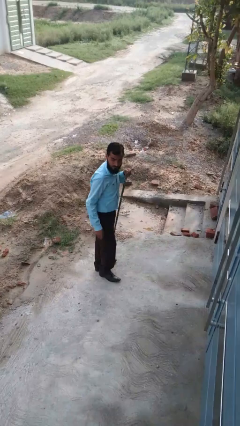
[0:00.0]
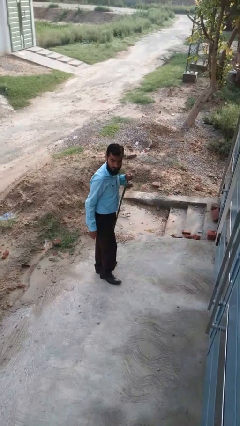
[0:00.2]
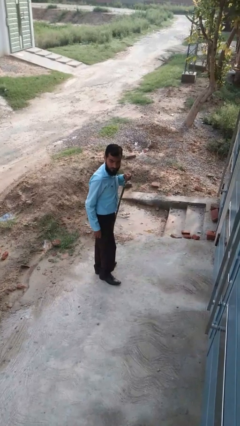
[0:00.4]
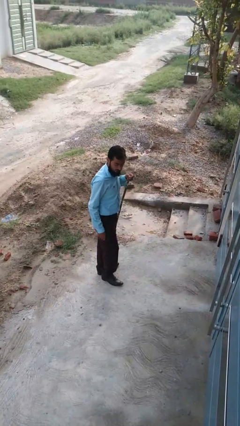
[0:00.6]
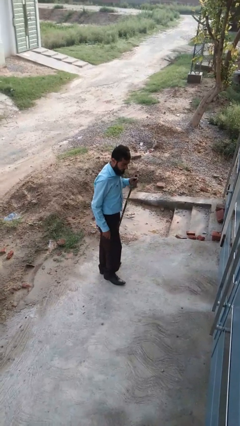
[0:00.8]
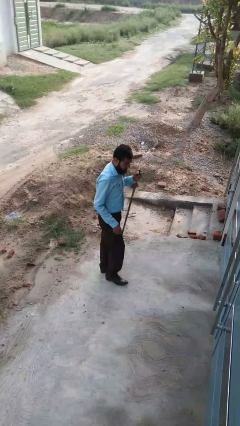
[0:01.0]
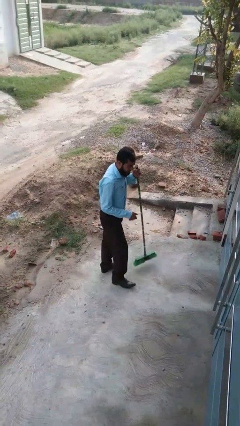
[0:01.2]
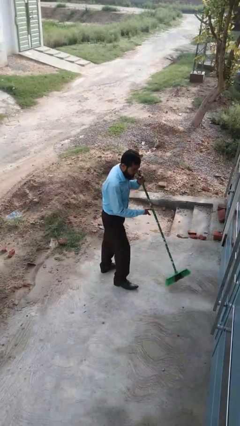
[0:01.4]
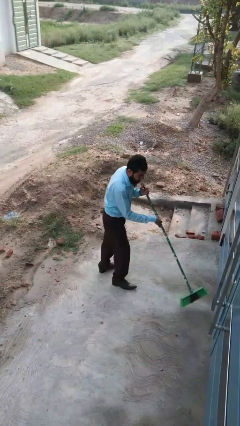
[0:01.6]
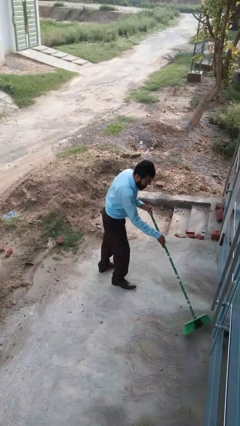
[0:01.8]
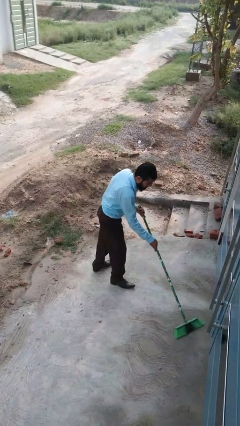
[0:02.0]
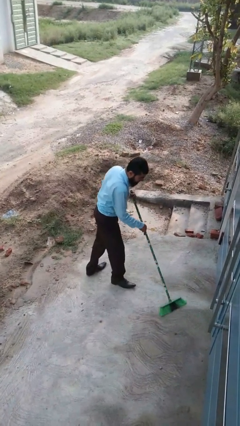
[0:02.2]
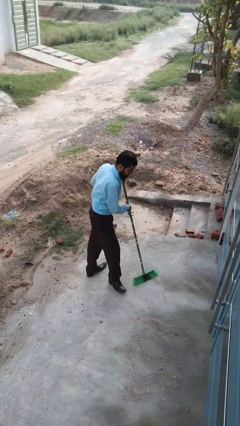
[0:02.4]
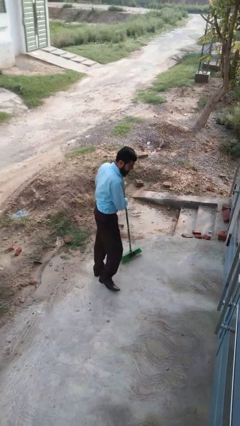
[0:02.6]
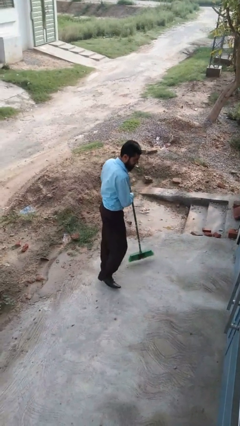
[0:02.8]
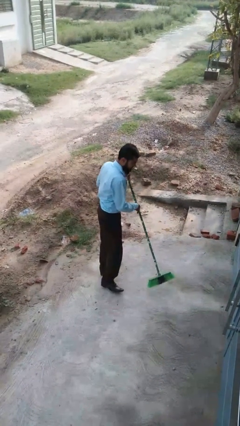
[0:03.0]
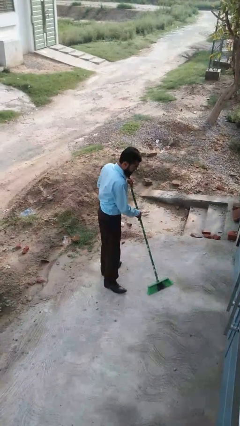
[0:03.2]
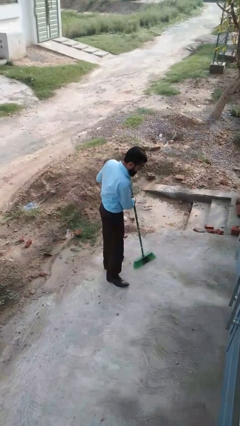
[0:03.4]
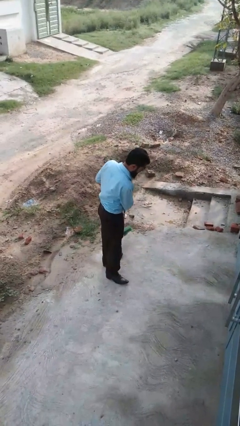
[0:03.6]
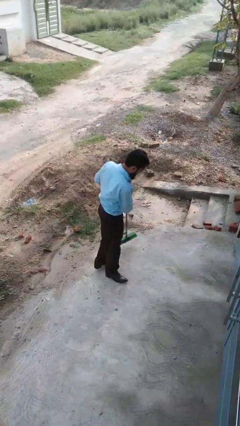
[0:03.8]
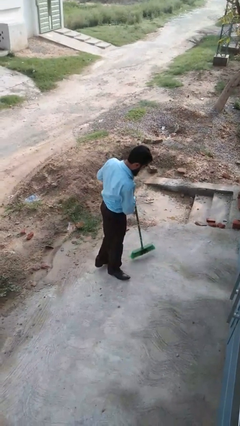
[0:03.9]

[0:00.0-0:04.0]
person sweeps floor

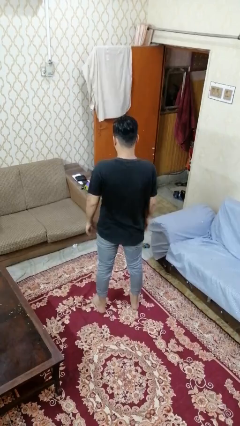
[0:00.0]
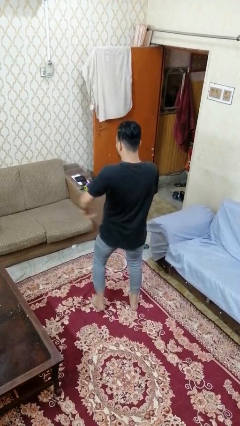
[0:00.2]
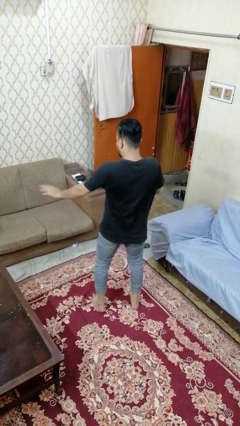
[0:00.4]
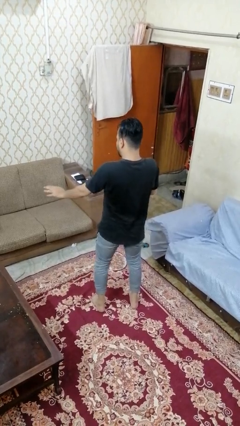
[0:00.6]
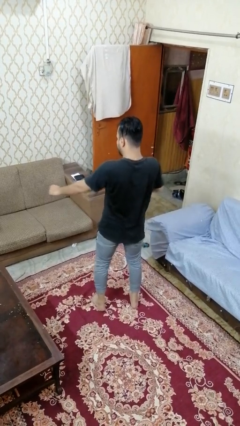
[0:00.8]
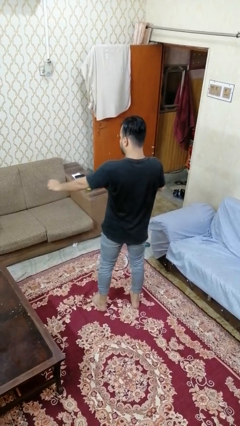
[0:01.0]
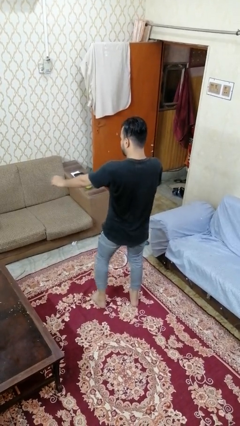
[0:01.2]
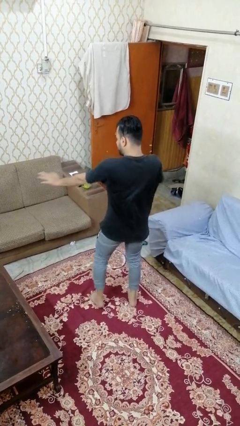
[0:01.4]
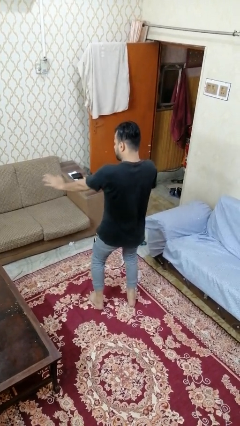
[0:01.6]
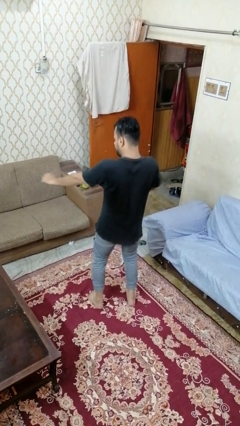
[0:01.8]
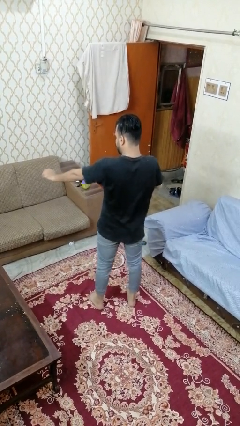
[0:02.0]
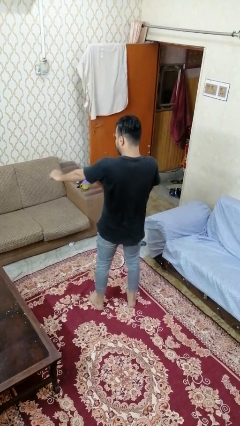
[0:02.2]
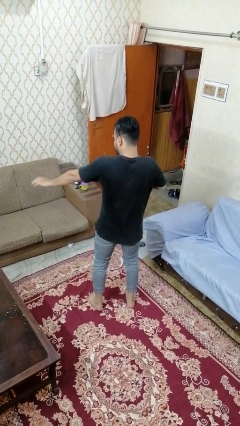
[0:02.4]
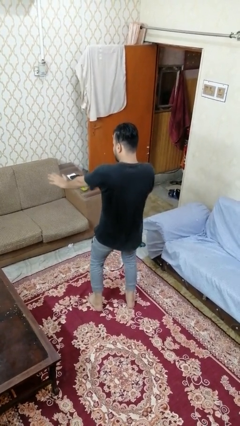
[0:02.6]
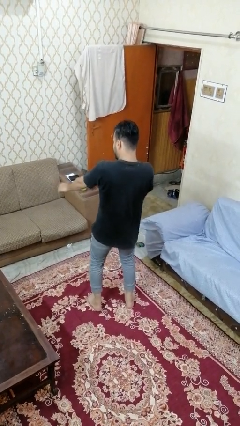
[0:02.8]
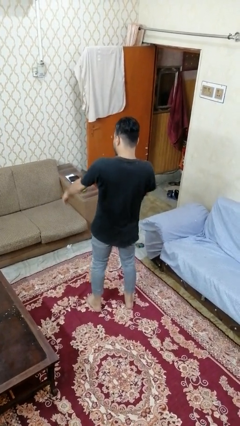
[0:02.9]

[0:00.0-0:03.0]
person dances in place

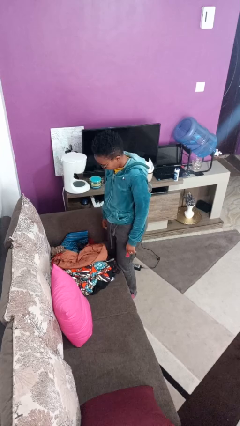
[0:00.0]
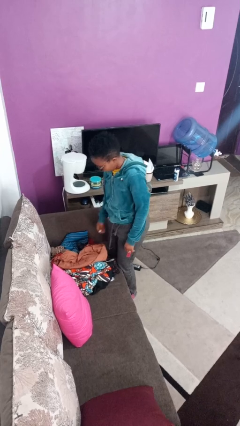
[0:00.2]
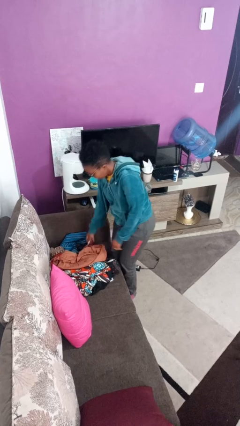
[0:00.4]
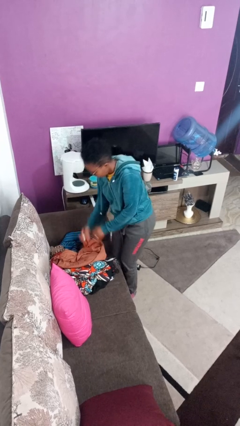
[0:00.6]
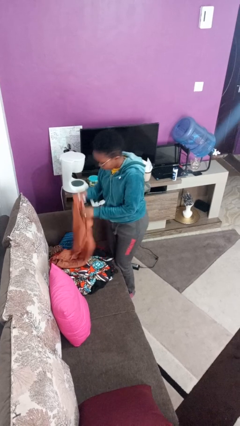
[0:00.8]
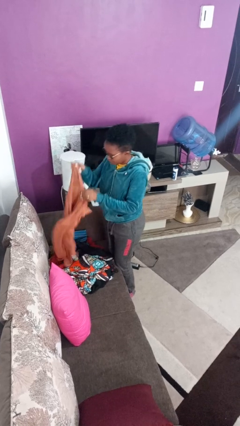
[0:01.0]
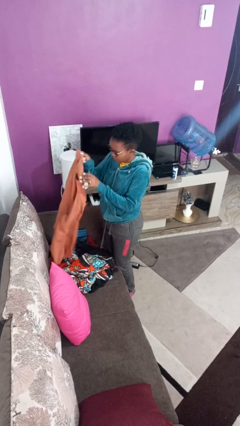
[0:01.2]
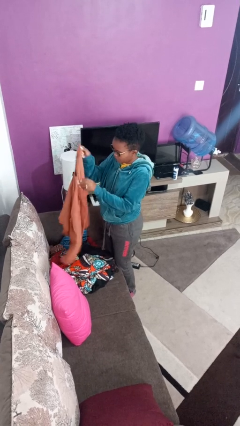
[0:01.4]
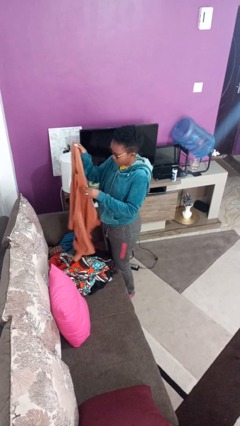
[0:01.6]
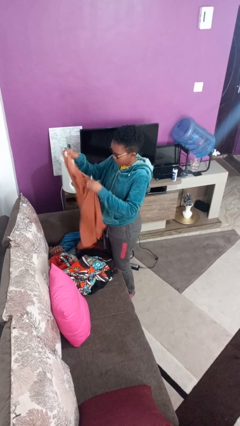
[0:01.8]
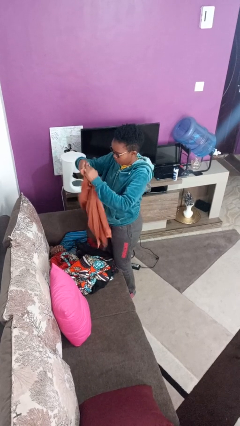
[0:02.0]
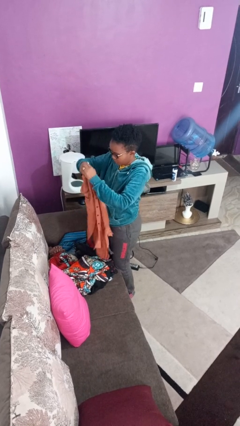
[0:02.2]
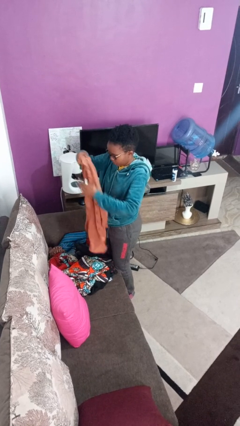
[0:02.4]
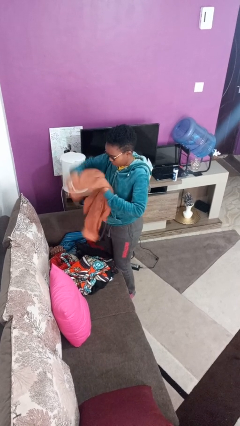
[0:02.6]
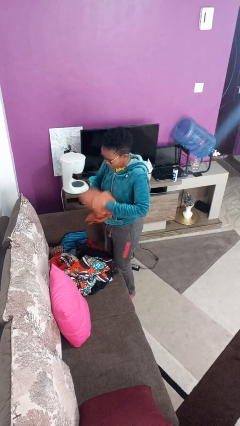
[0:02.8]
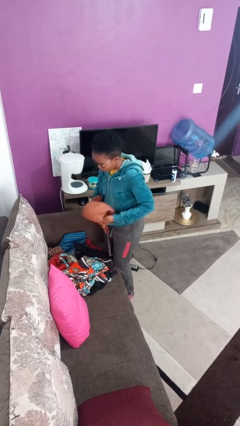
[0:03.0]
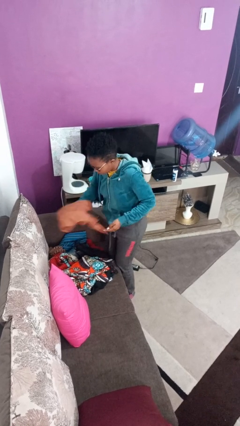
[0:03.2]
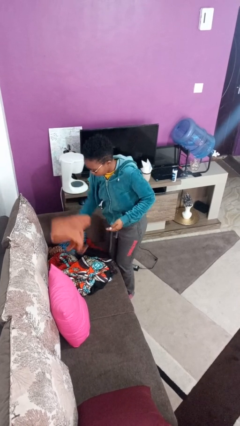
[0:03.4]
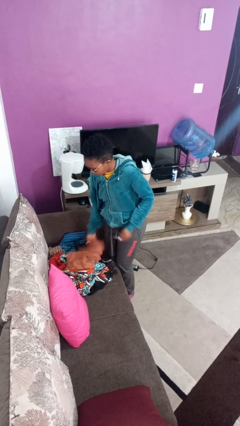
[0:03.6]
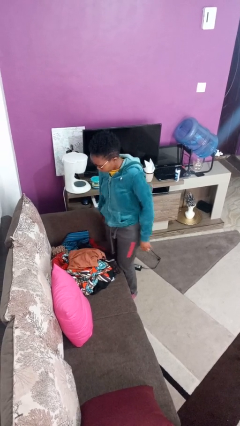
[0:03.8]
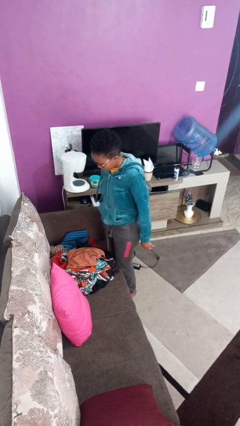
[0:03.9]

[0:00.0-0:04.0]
person folds shirt

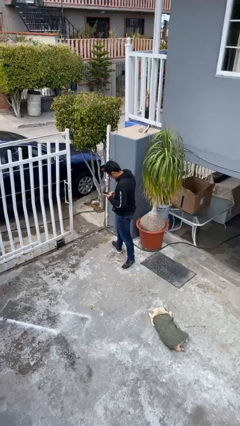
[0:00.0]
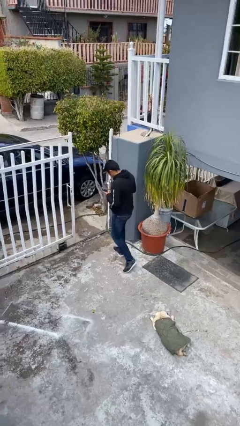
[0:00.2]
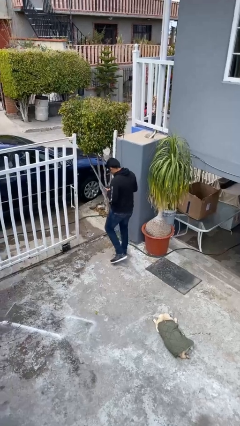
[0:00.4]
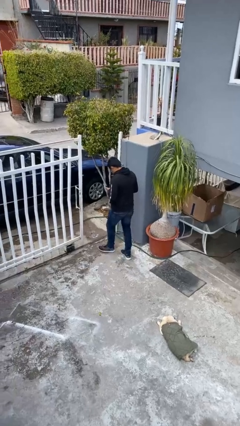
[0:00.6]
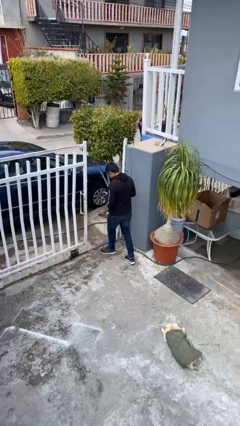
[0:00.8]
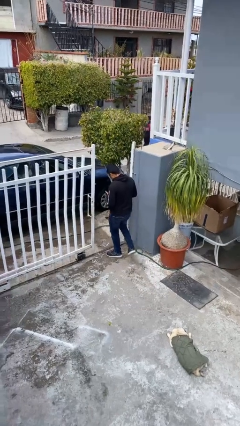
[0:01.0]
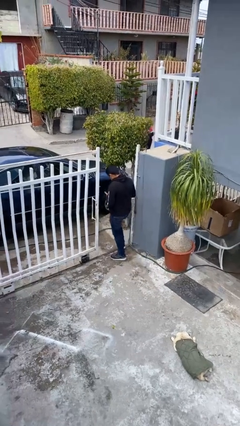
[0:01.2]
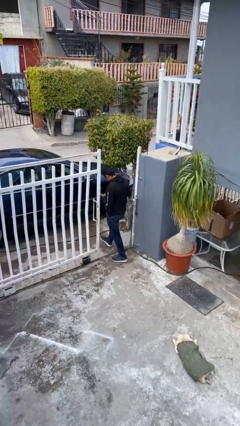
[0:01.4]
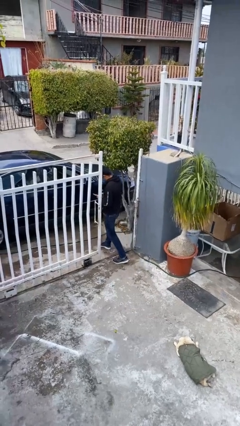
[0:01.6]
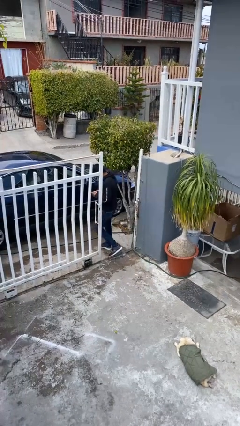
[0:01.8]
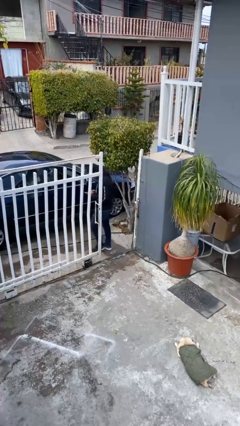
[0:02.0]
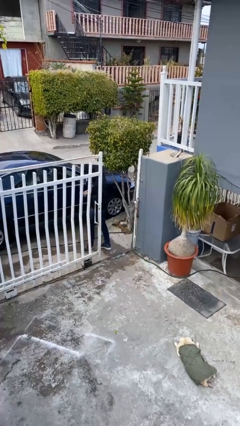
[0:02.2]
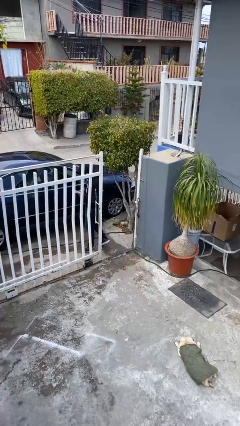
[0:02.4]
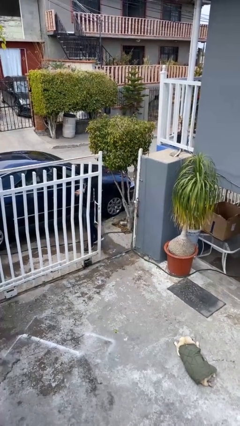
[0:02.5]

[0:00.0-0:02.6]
person exits scene through structure

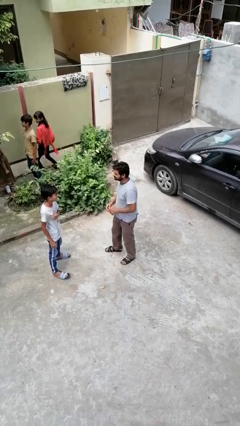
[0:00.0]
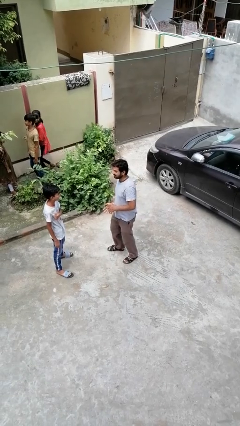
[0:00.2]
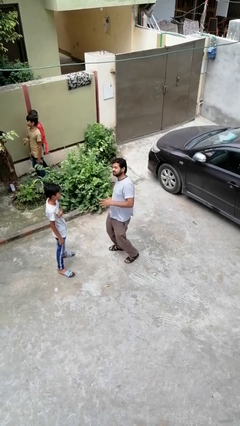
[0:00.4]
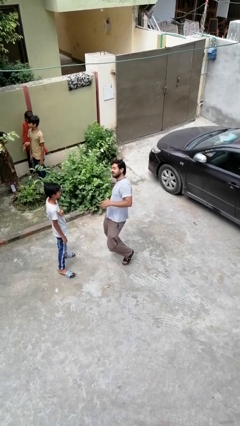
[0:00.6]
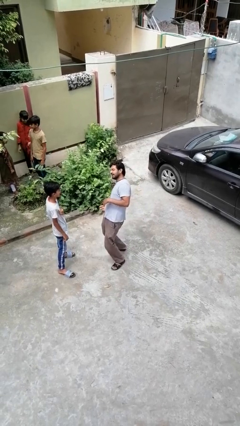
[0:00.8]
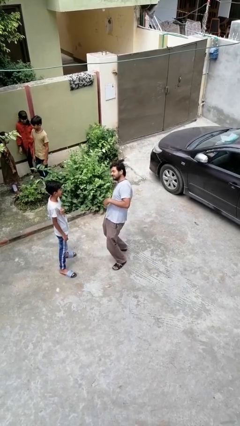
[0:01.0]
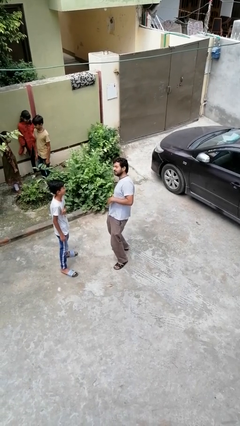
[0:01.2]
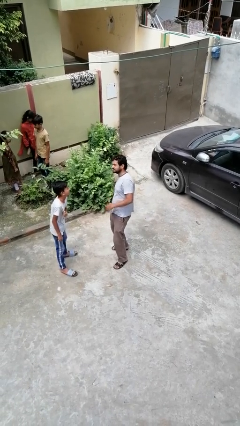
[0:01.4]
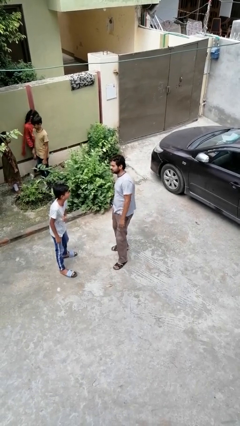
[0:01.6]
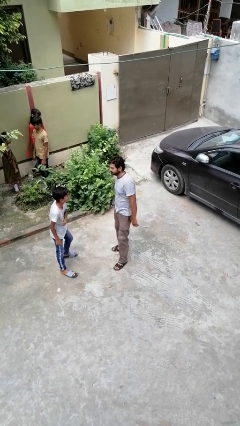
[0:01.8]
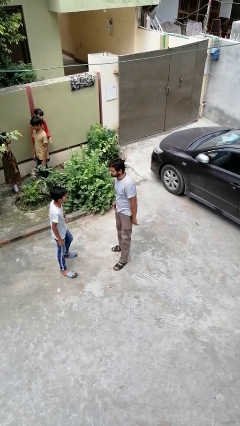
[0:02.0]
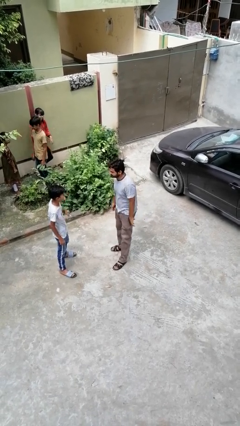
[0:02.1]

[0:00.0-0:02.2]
person laughs with person

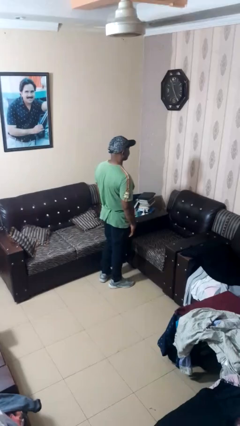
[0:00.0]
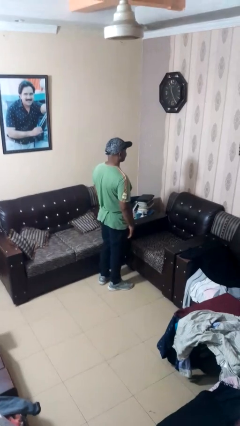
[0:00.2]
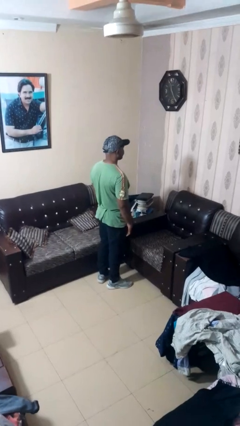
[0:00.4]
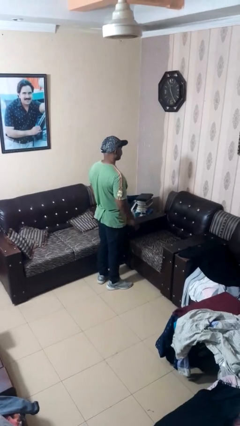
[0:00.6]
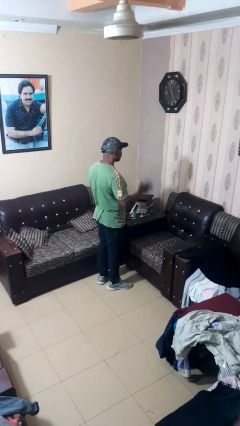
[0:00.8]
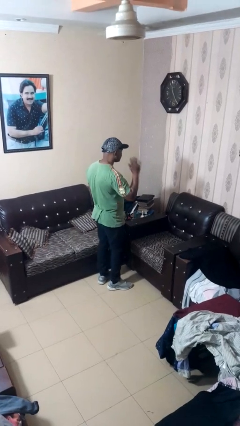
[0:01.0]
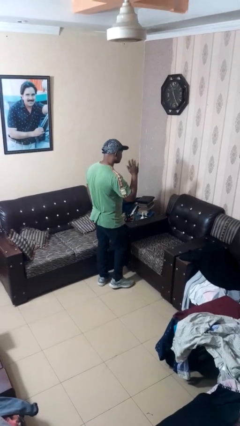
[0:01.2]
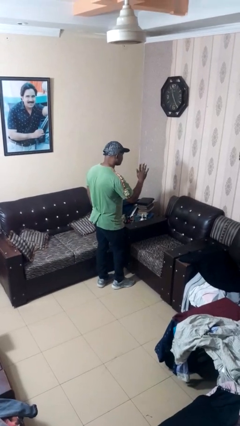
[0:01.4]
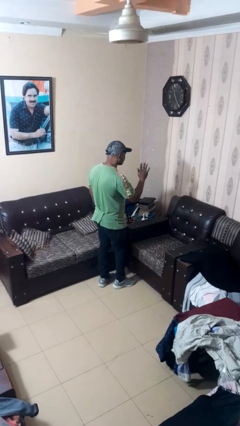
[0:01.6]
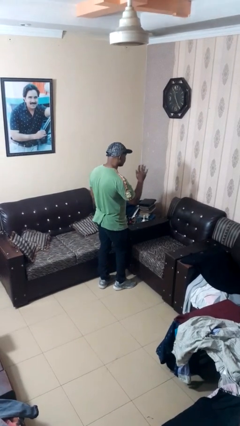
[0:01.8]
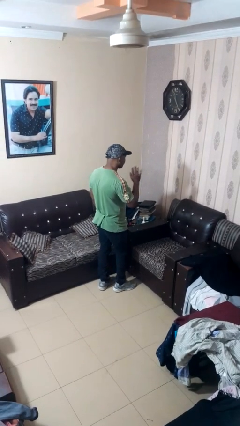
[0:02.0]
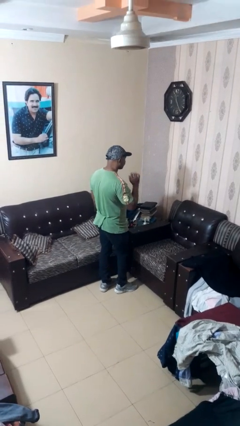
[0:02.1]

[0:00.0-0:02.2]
person gestures stop
